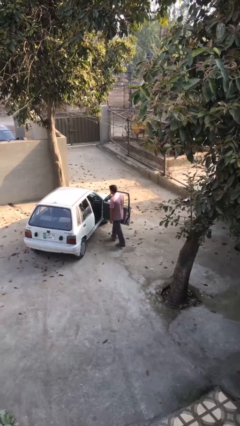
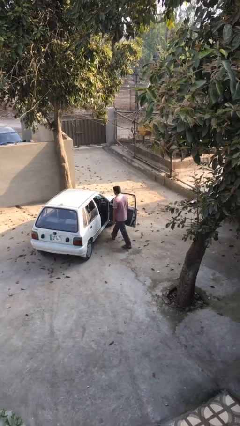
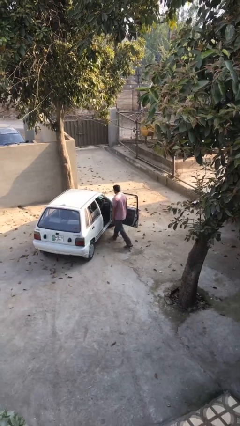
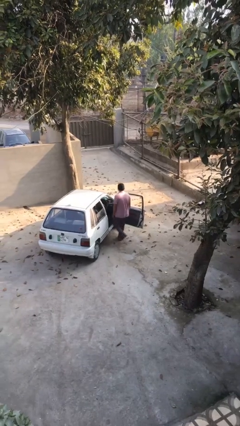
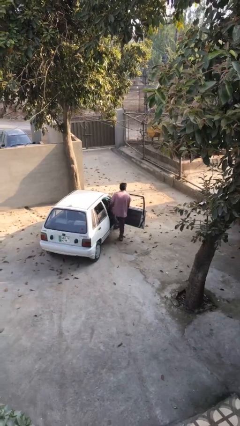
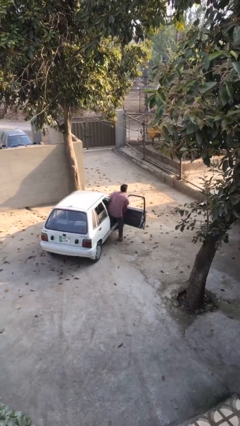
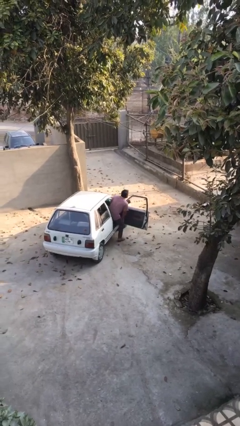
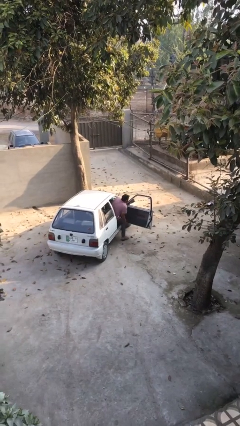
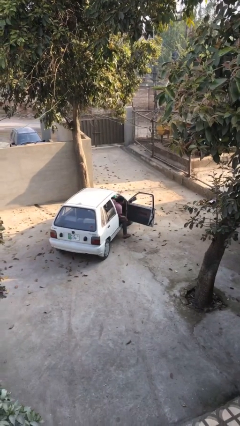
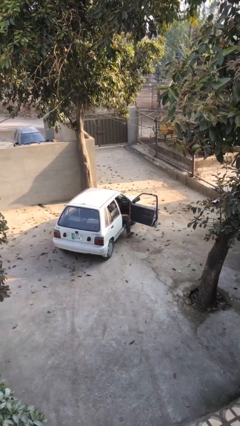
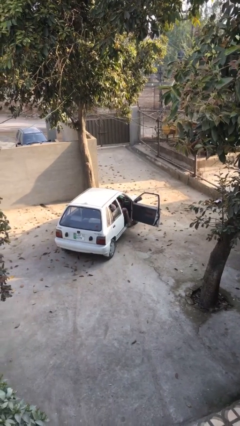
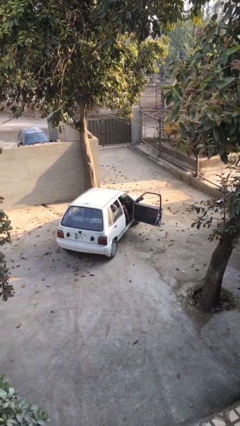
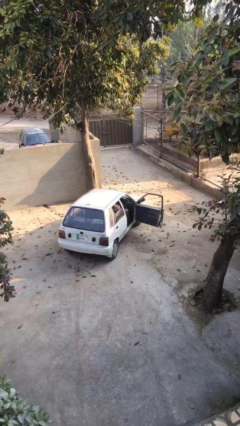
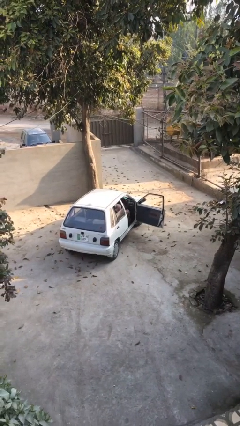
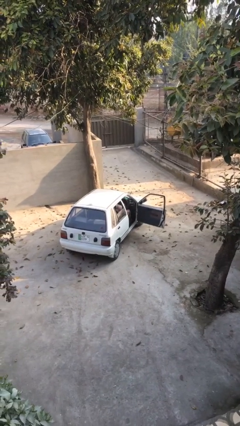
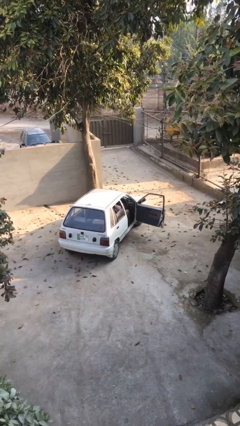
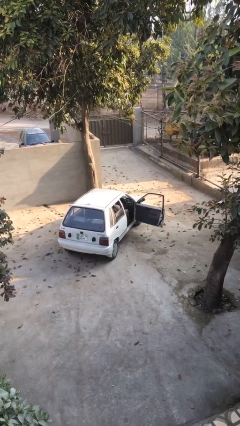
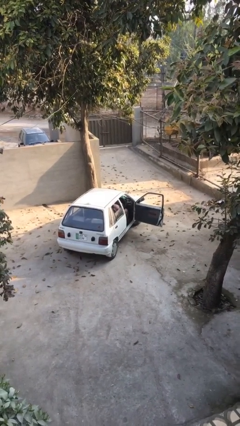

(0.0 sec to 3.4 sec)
person enters car

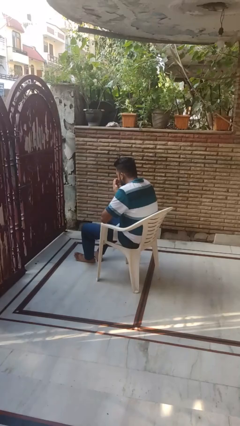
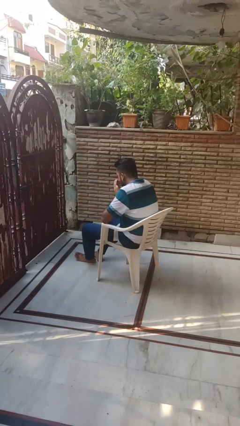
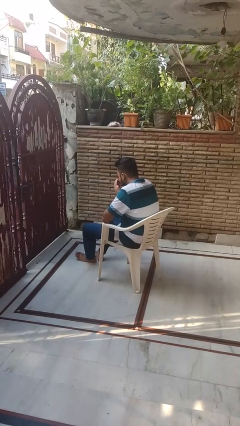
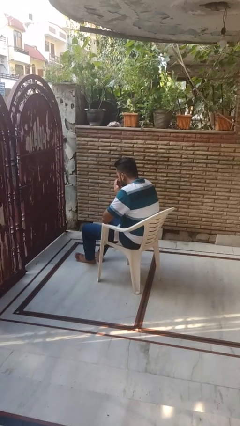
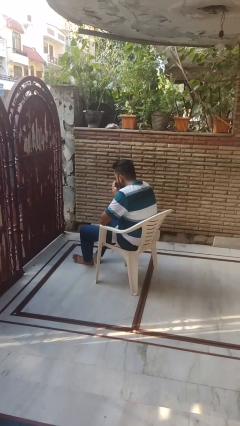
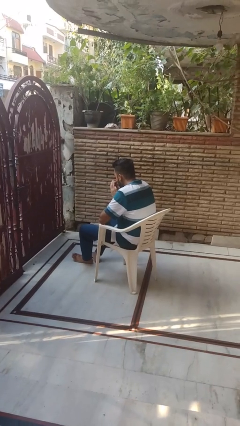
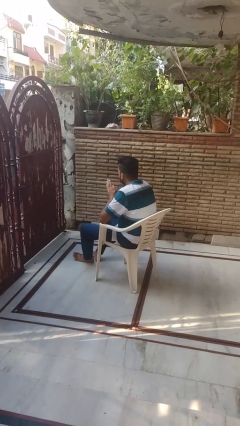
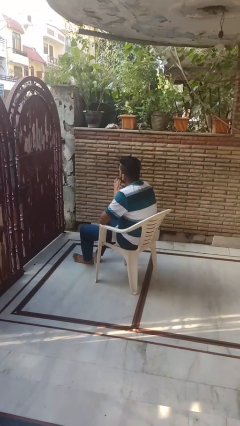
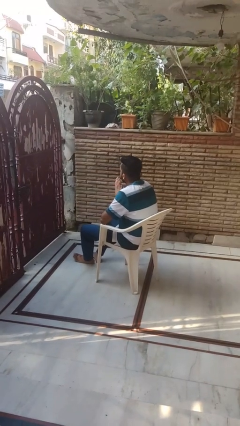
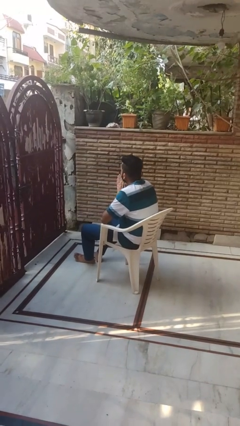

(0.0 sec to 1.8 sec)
person blows into hands

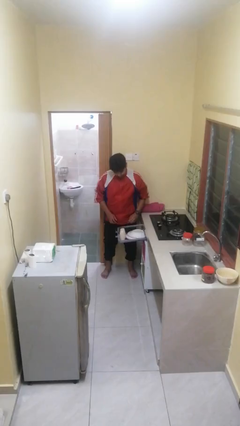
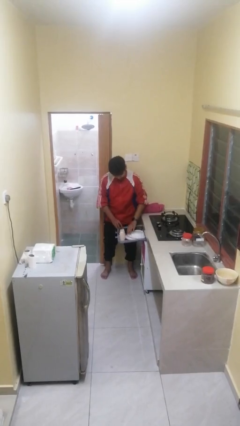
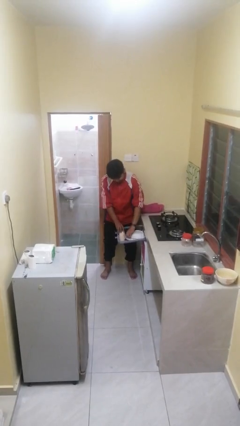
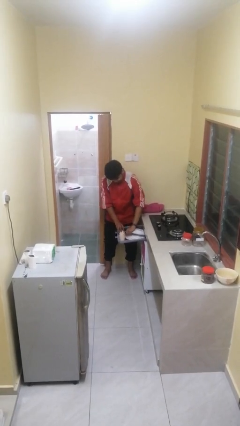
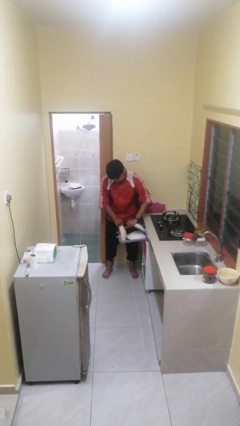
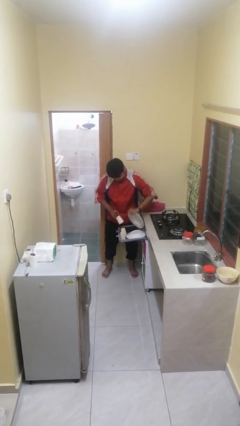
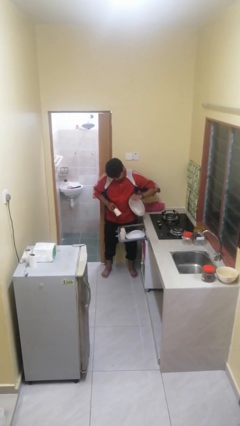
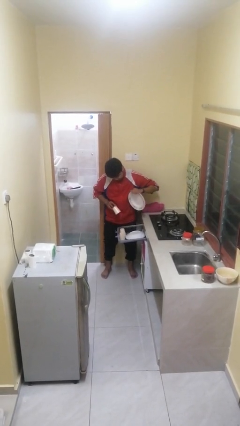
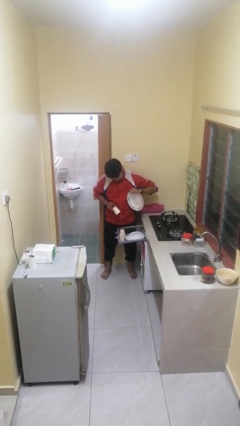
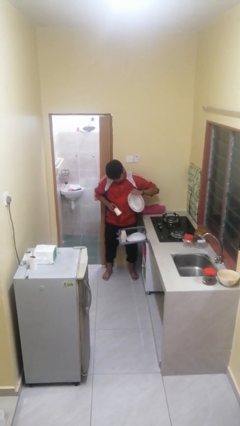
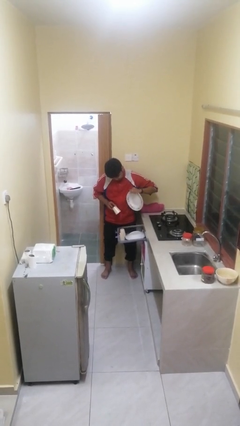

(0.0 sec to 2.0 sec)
person takes object from kitchen drawer

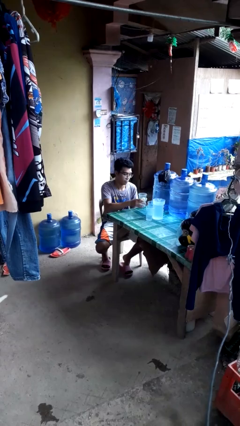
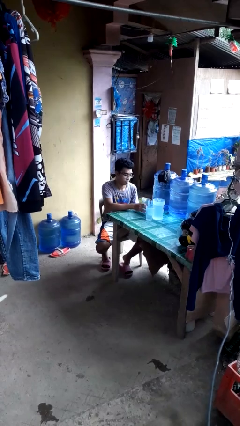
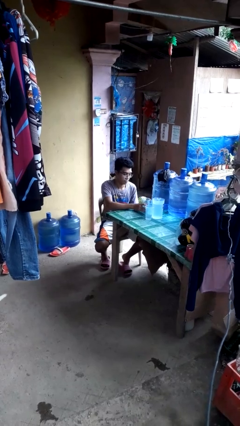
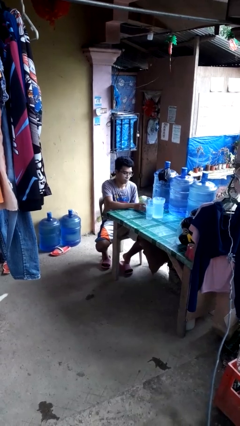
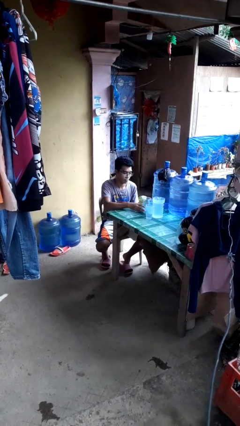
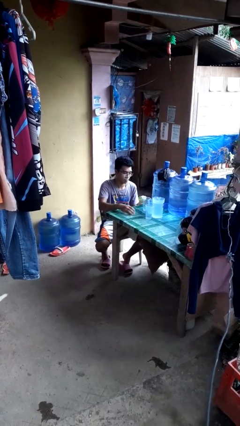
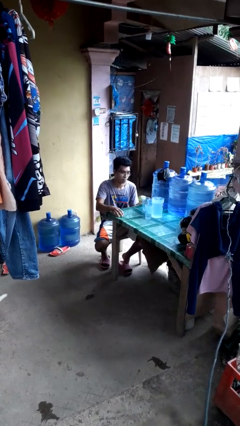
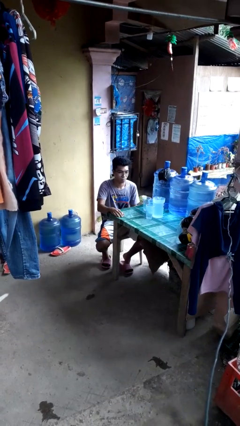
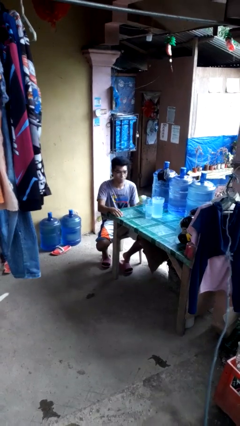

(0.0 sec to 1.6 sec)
person puts down object on table

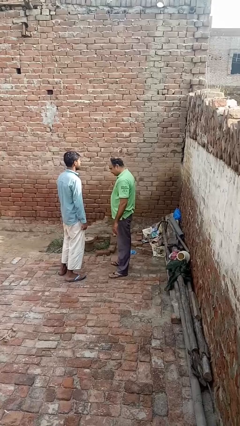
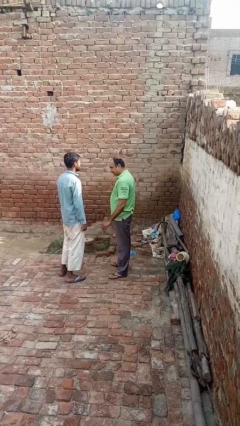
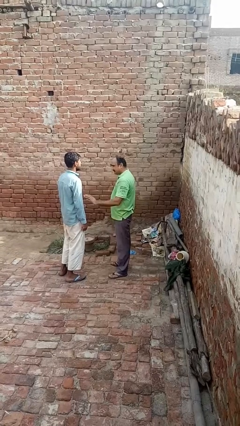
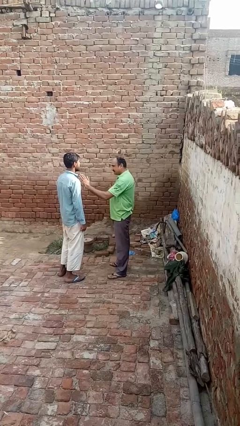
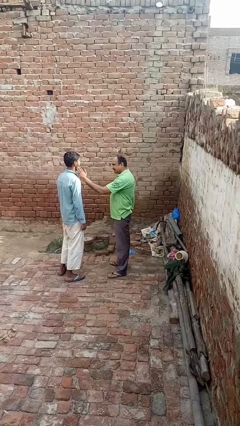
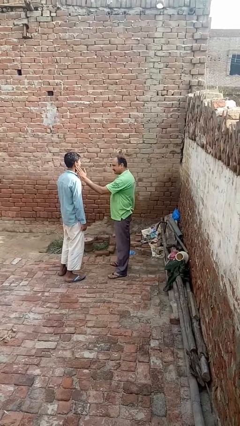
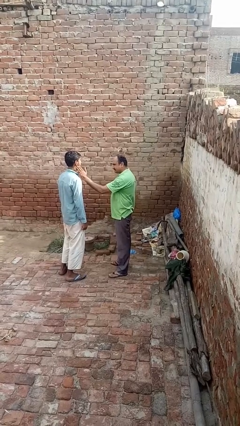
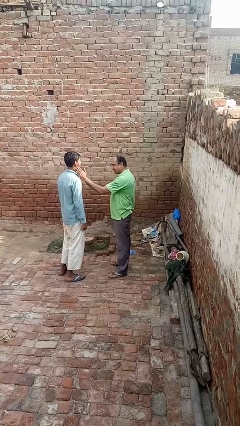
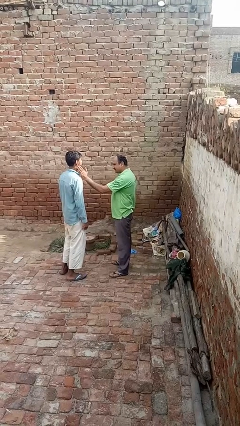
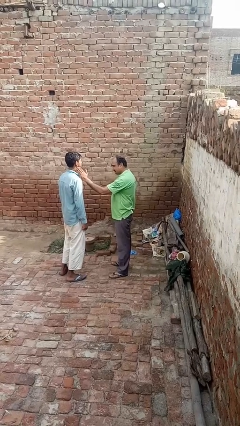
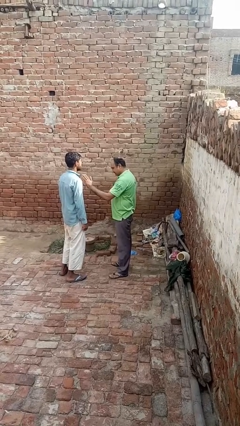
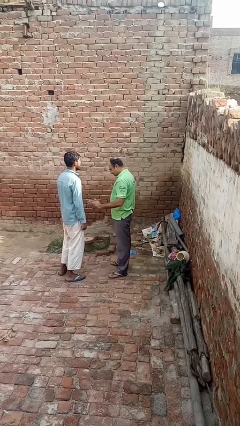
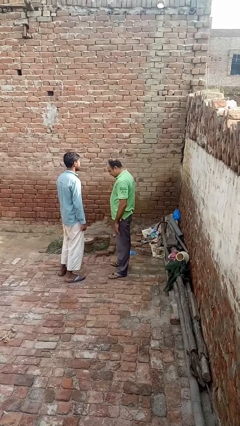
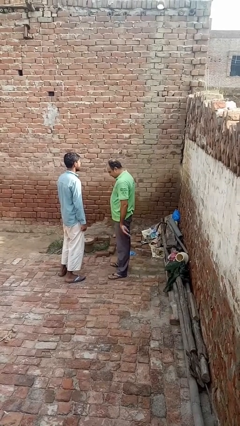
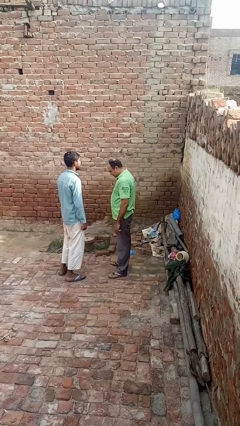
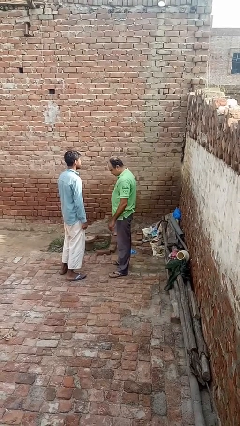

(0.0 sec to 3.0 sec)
person touches face of person

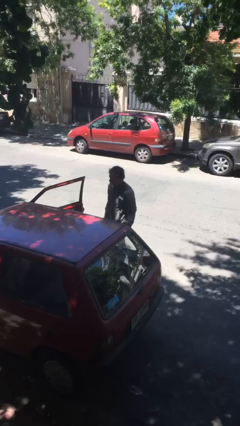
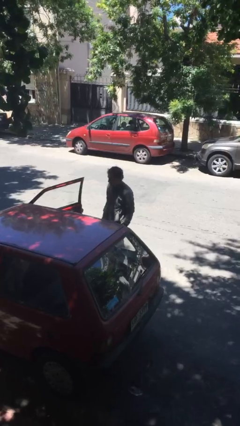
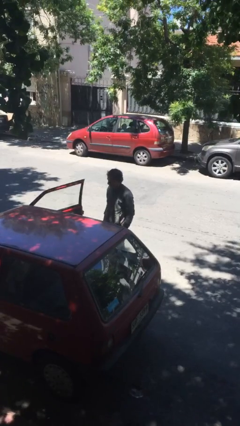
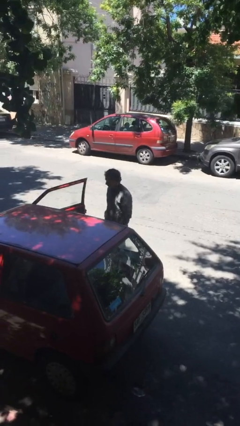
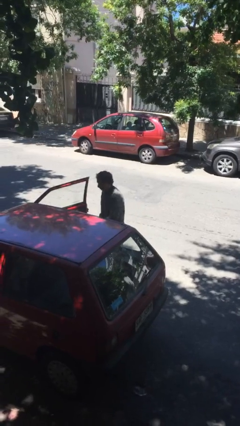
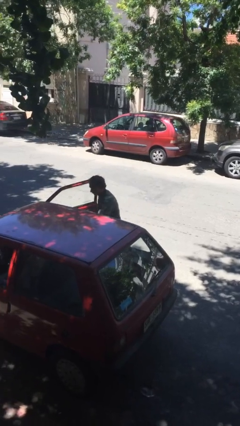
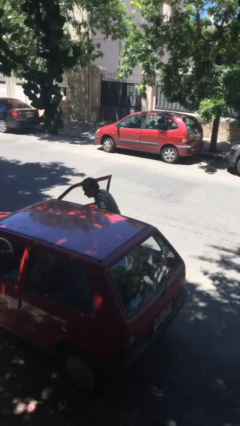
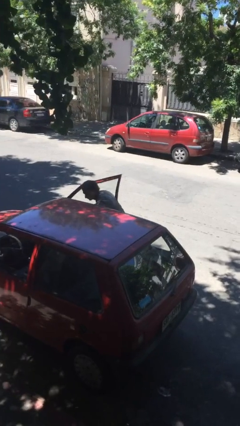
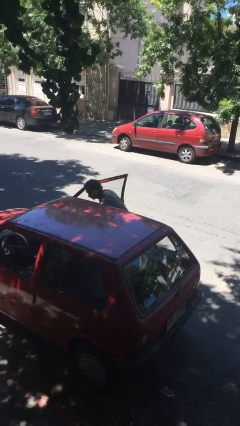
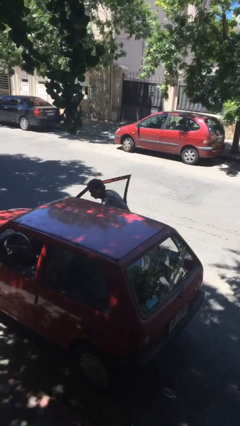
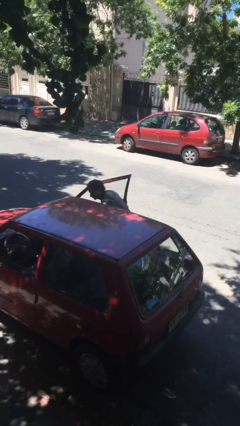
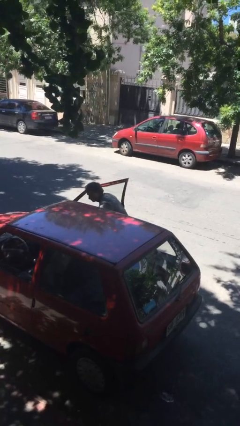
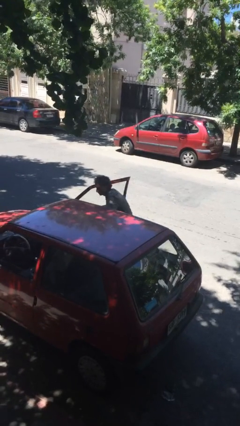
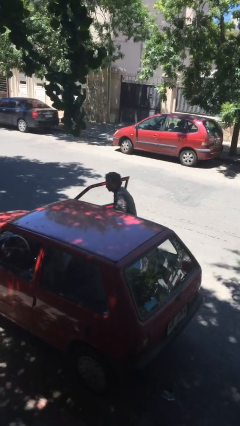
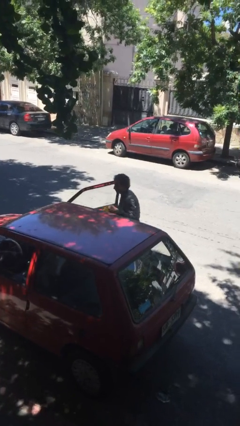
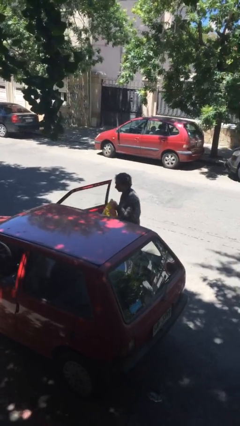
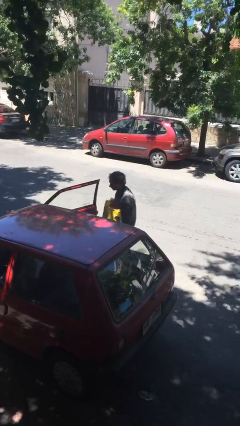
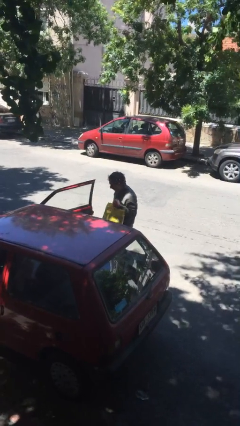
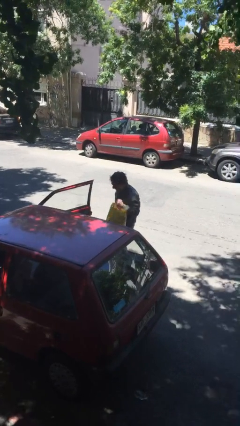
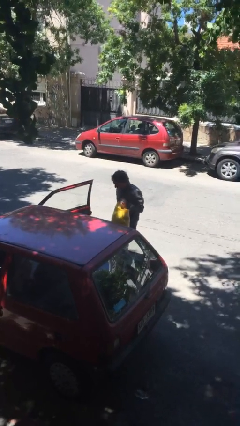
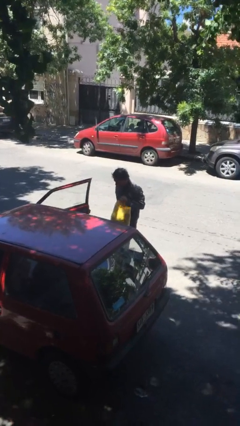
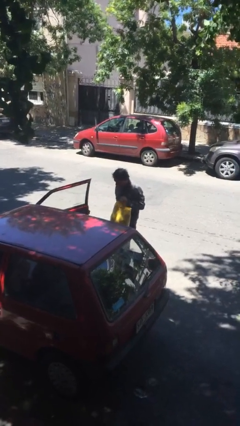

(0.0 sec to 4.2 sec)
person unloads car

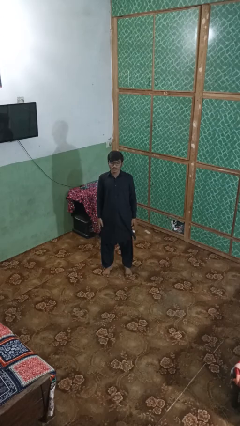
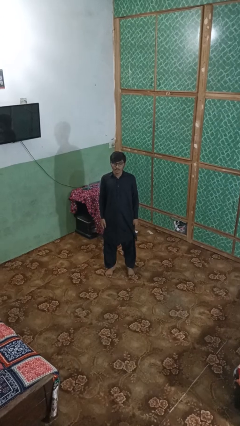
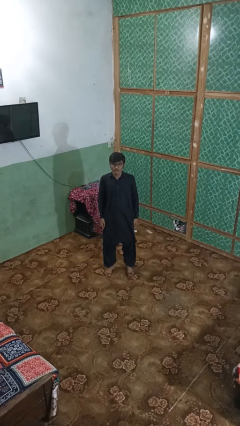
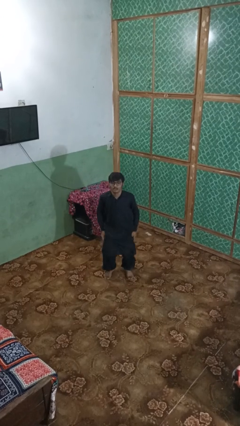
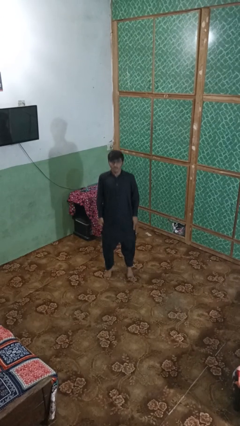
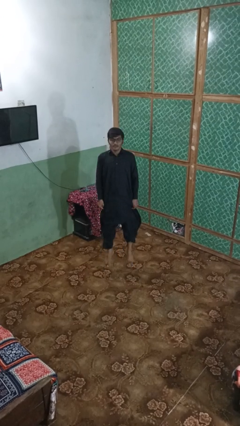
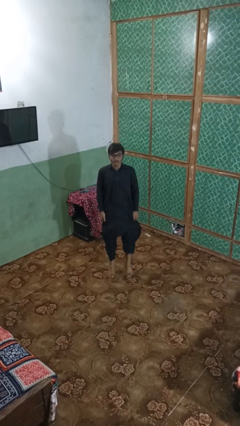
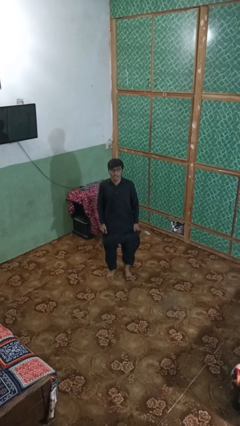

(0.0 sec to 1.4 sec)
person jumps
